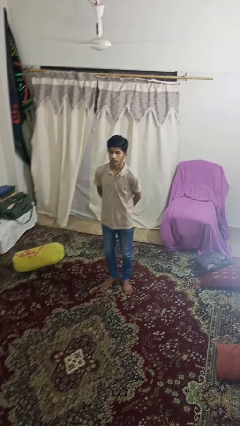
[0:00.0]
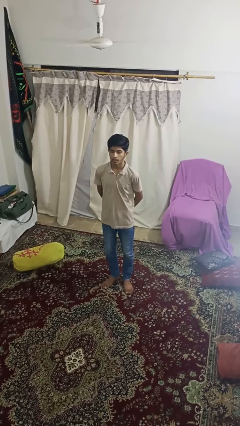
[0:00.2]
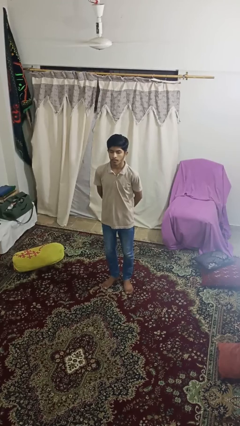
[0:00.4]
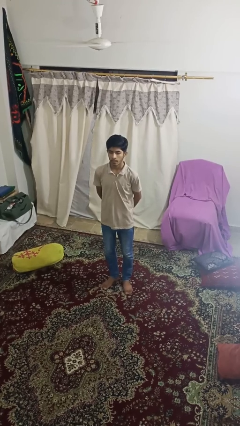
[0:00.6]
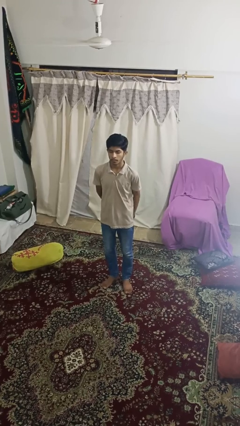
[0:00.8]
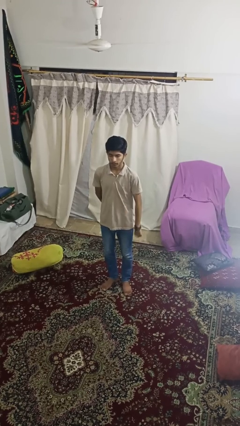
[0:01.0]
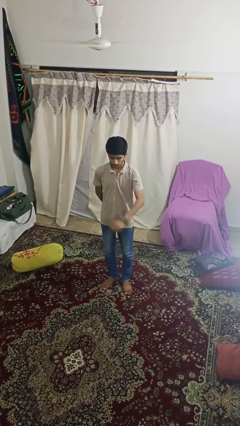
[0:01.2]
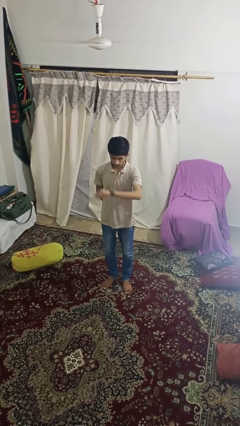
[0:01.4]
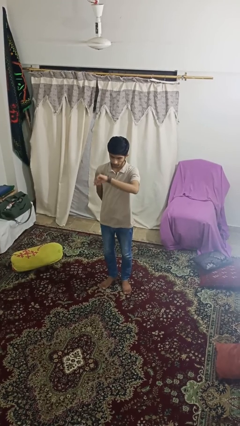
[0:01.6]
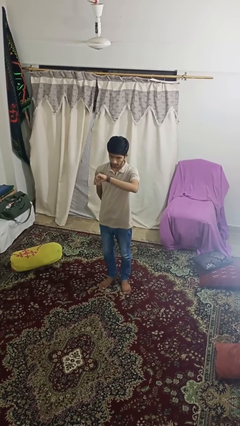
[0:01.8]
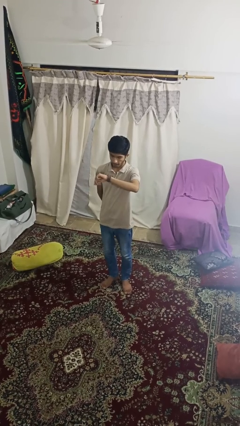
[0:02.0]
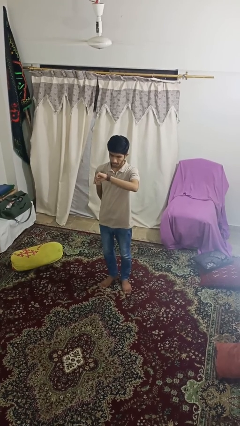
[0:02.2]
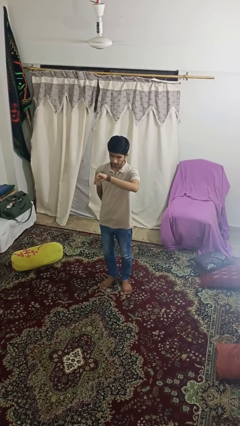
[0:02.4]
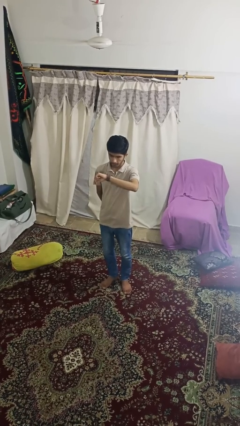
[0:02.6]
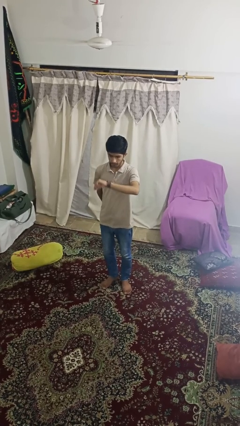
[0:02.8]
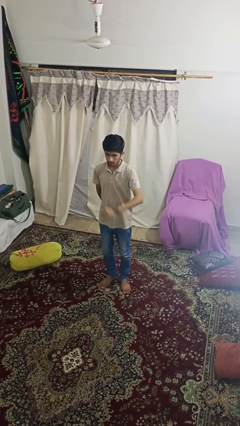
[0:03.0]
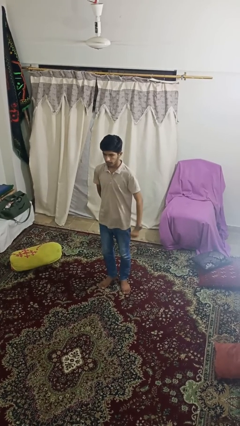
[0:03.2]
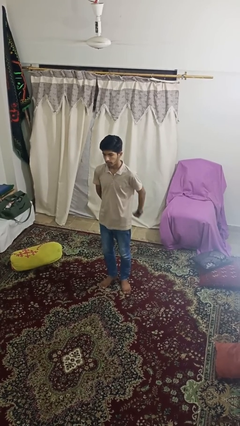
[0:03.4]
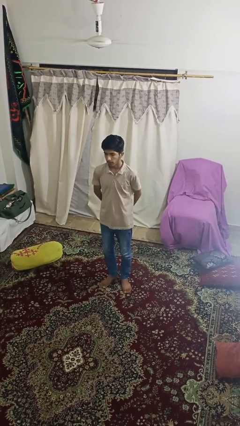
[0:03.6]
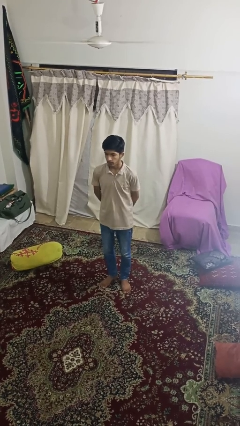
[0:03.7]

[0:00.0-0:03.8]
person looks at wristwatch

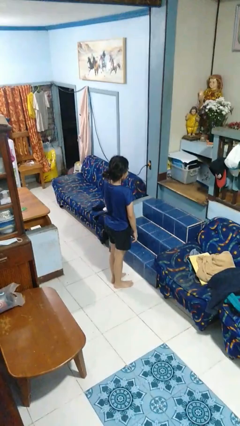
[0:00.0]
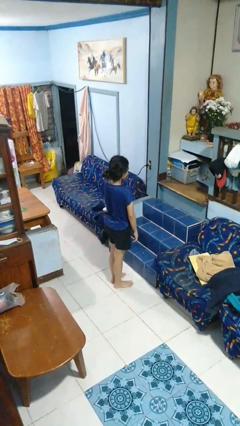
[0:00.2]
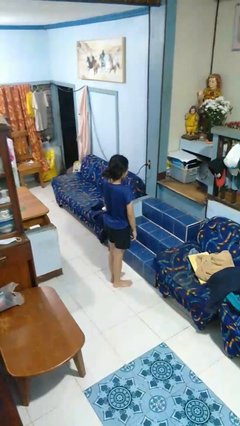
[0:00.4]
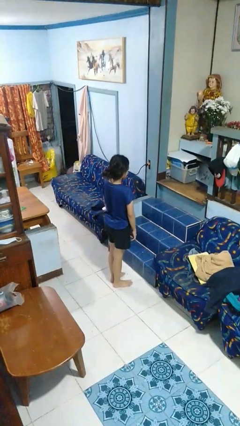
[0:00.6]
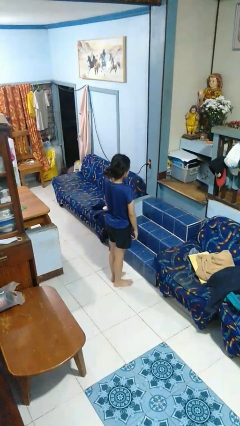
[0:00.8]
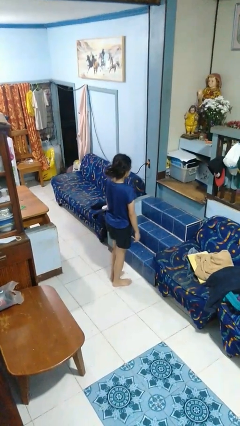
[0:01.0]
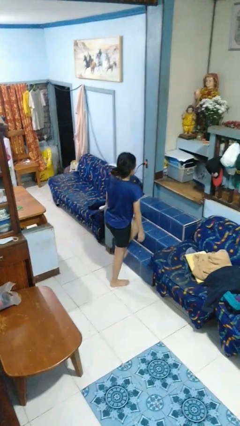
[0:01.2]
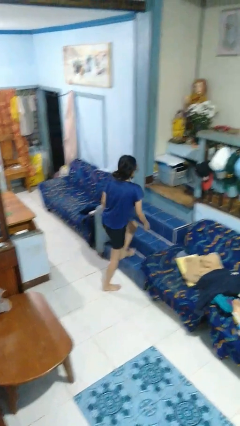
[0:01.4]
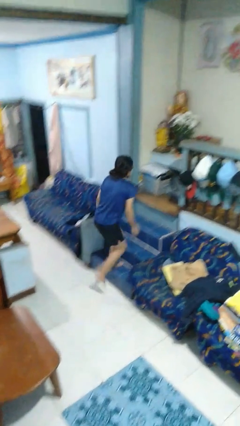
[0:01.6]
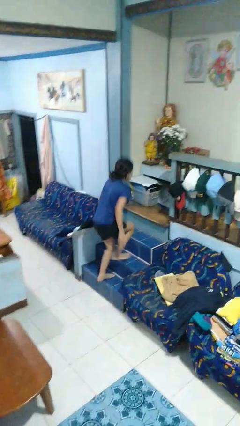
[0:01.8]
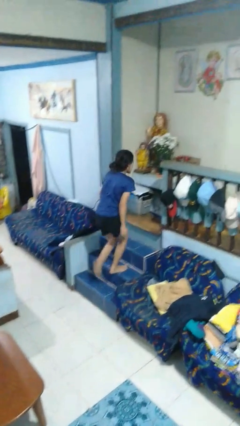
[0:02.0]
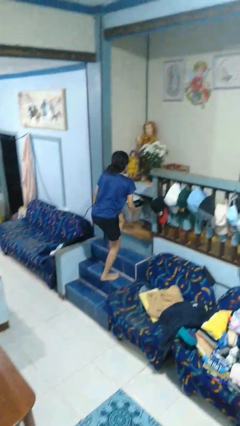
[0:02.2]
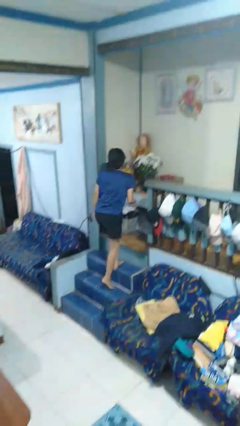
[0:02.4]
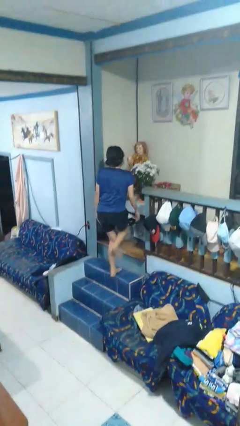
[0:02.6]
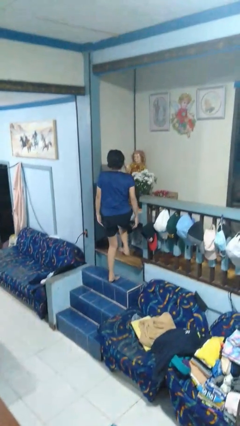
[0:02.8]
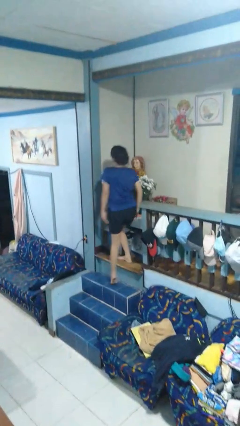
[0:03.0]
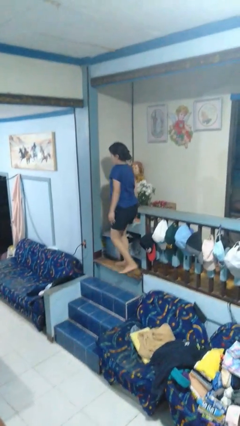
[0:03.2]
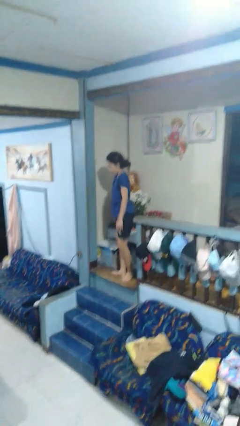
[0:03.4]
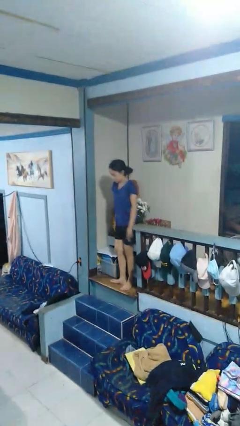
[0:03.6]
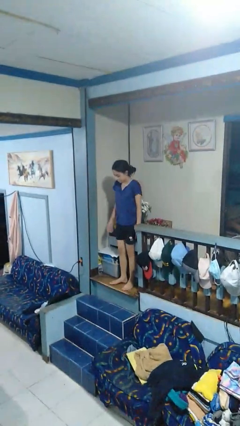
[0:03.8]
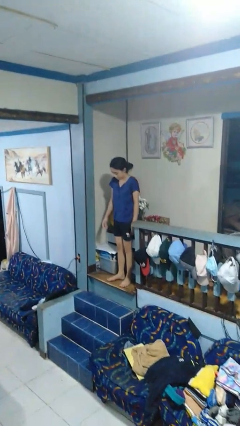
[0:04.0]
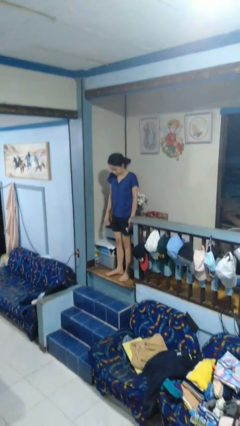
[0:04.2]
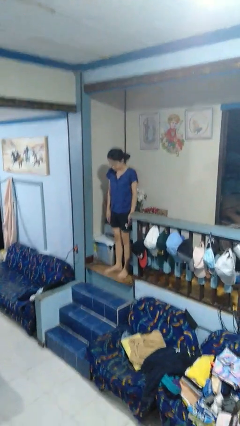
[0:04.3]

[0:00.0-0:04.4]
person climbs up stairs

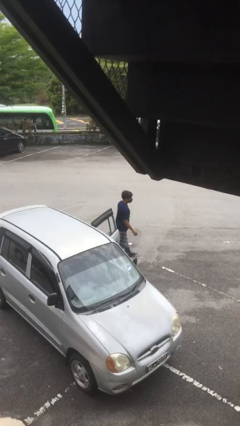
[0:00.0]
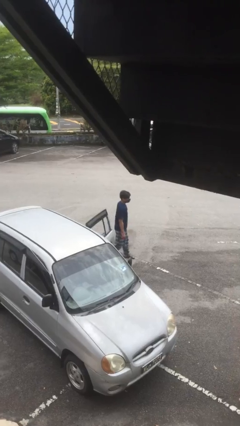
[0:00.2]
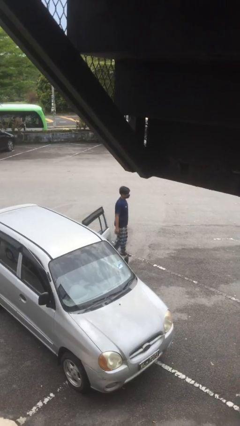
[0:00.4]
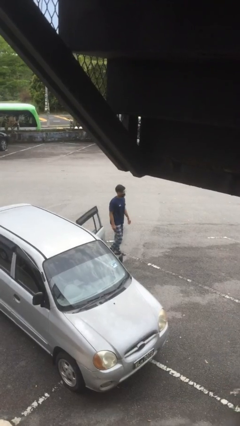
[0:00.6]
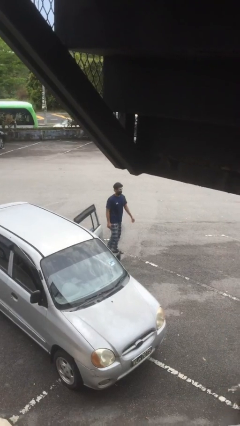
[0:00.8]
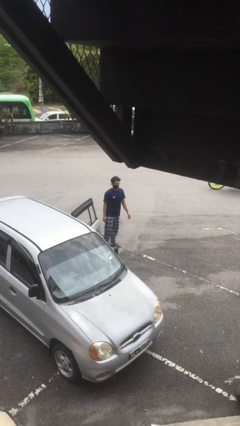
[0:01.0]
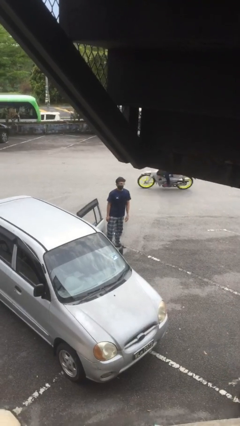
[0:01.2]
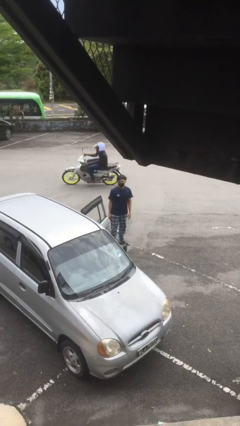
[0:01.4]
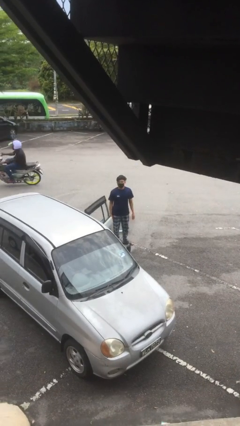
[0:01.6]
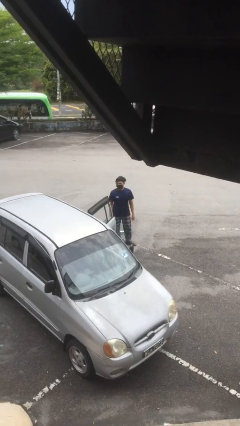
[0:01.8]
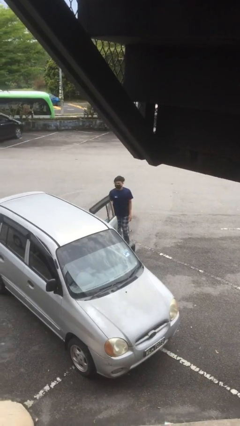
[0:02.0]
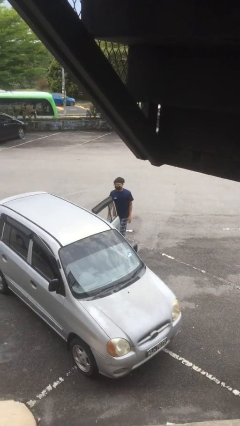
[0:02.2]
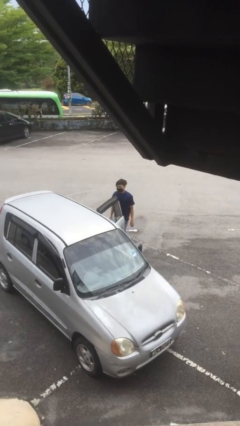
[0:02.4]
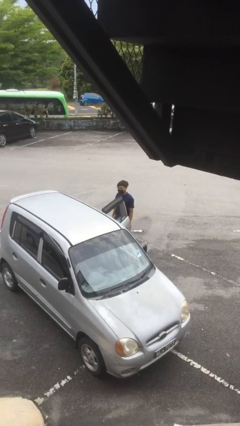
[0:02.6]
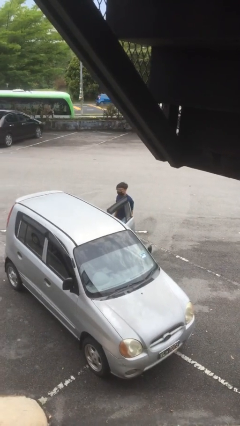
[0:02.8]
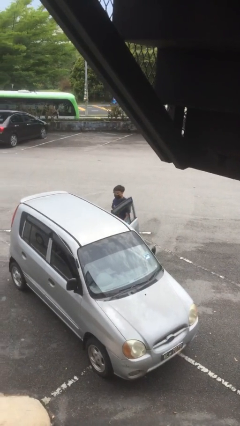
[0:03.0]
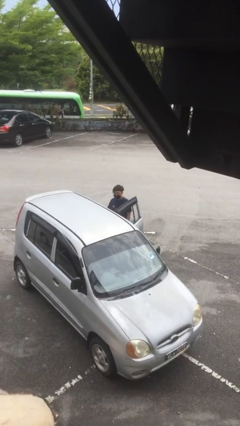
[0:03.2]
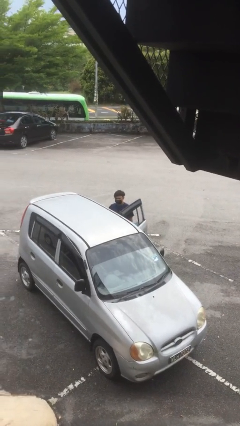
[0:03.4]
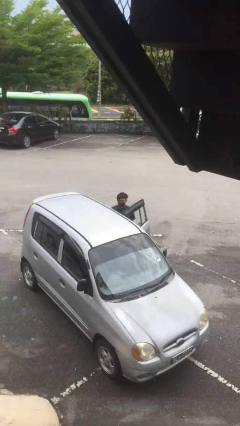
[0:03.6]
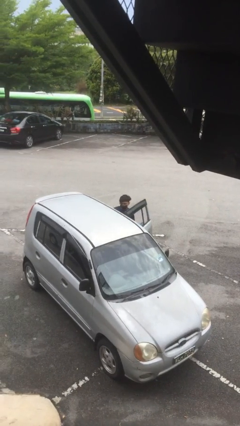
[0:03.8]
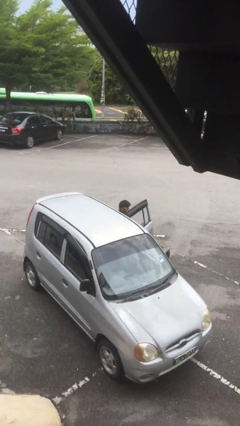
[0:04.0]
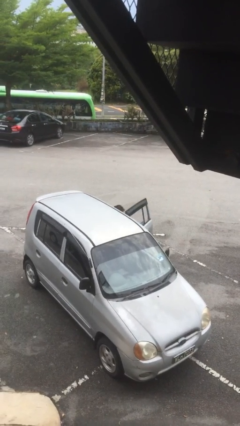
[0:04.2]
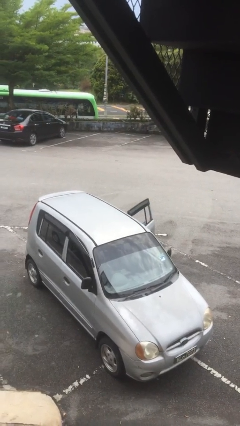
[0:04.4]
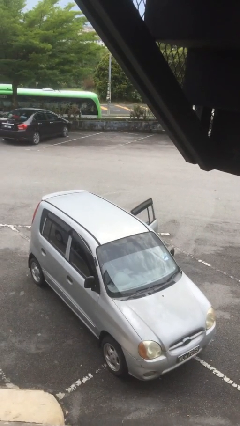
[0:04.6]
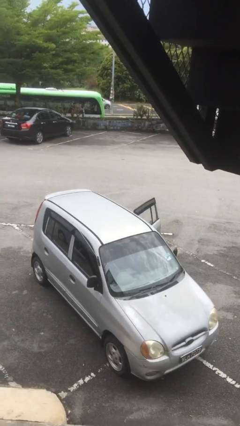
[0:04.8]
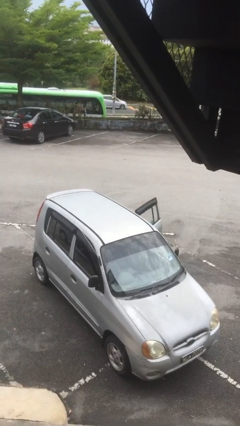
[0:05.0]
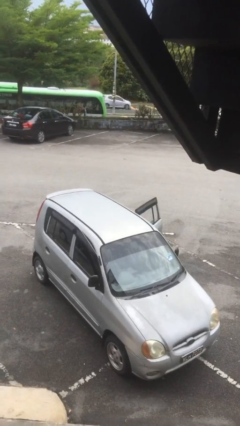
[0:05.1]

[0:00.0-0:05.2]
person enters car

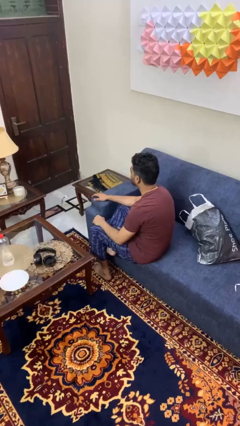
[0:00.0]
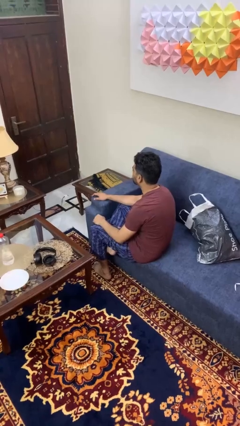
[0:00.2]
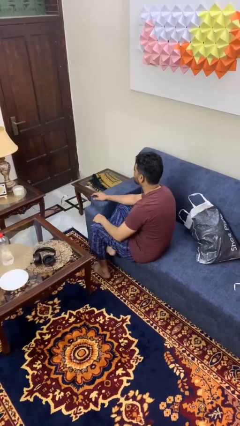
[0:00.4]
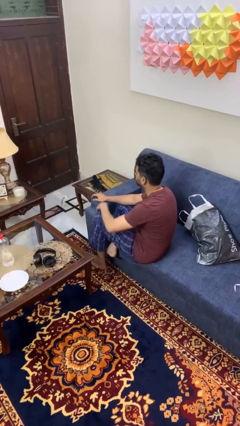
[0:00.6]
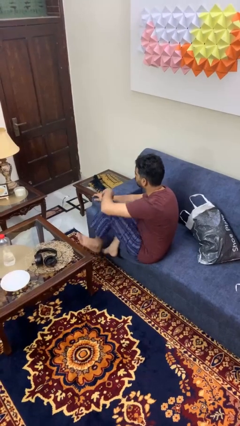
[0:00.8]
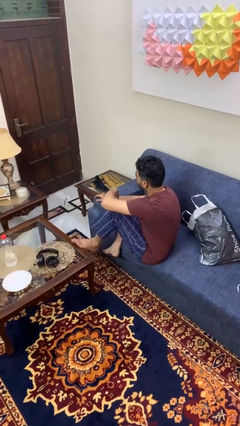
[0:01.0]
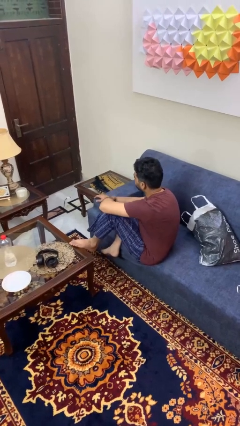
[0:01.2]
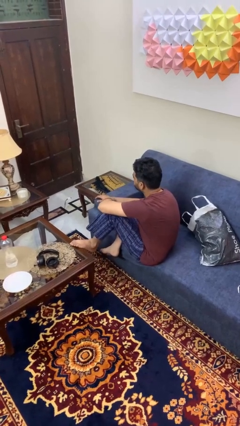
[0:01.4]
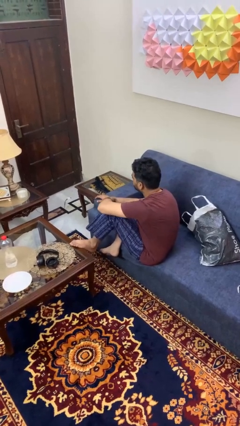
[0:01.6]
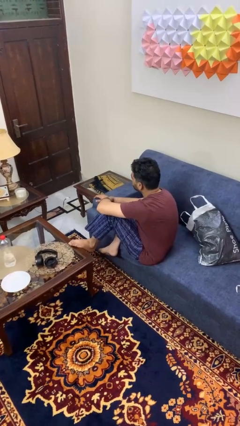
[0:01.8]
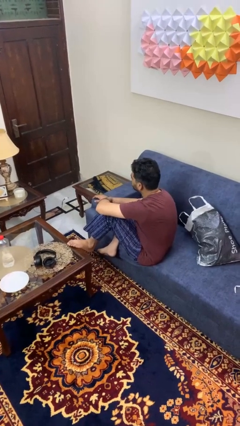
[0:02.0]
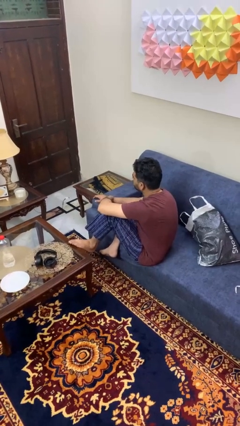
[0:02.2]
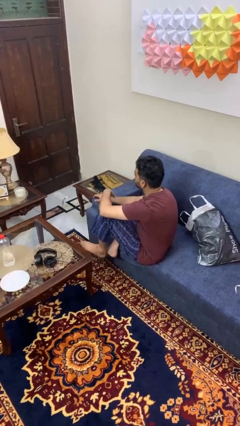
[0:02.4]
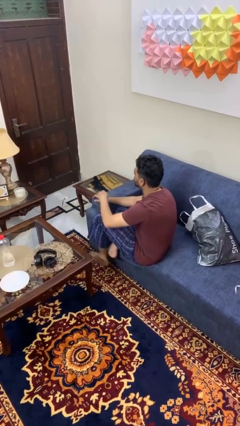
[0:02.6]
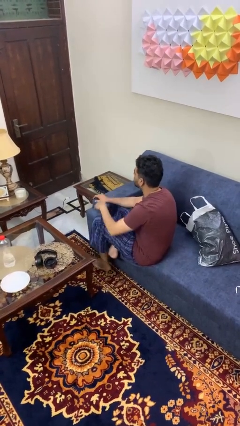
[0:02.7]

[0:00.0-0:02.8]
person puts feet up

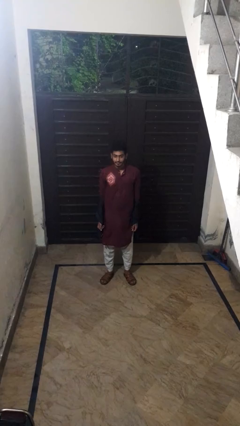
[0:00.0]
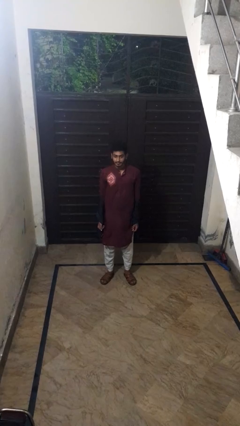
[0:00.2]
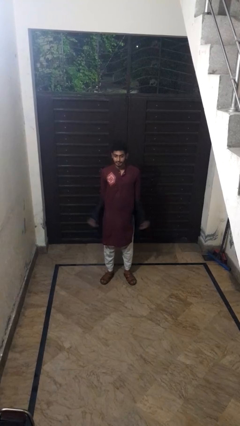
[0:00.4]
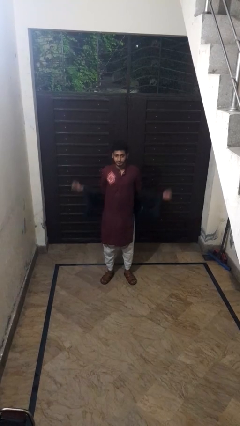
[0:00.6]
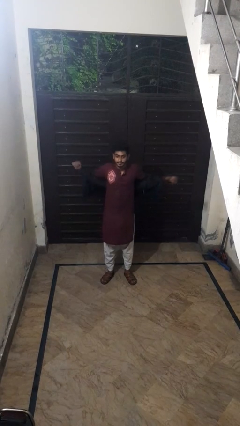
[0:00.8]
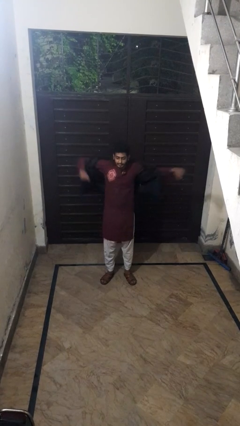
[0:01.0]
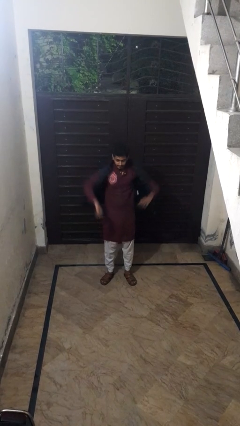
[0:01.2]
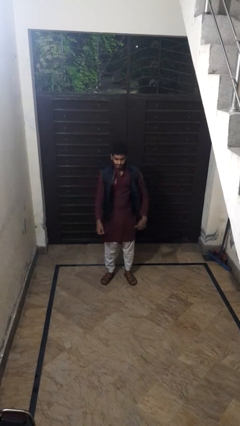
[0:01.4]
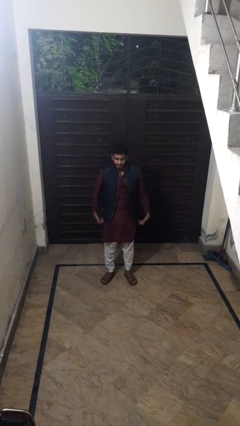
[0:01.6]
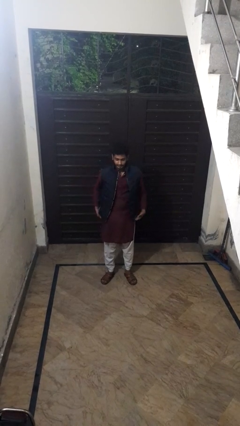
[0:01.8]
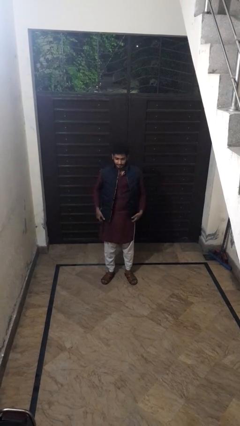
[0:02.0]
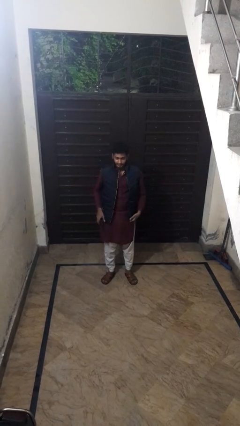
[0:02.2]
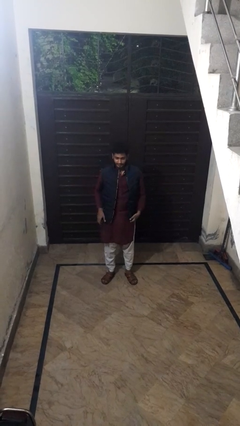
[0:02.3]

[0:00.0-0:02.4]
person puts on jacket
